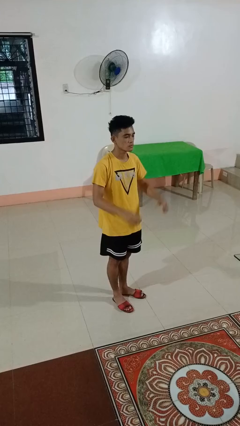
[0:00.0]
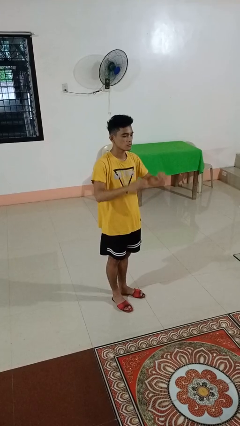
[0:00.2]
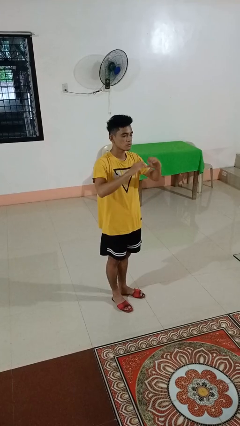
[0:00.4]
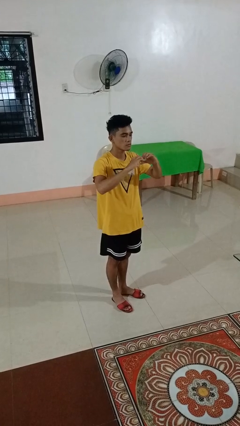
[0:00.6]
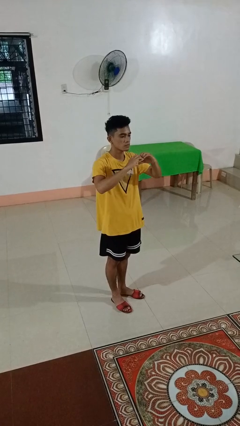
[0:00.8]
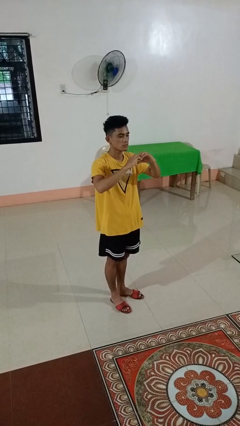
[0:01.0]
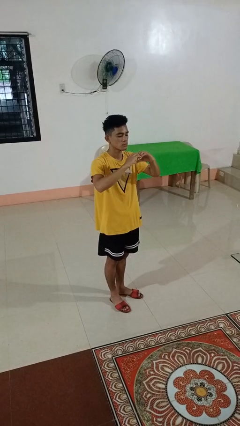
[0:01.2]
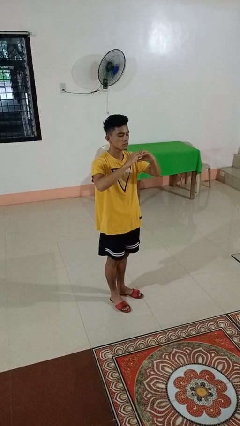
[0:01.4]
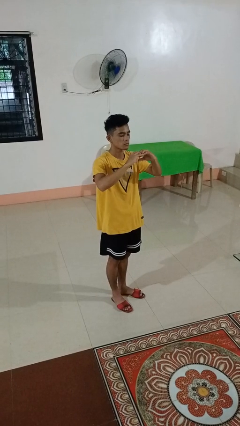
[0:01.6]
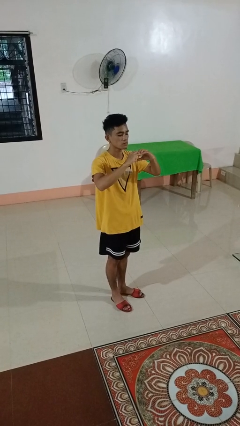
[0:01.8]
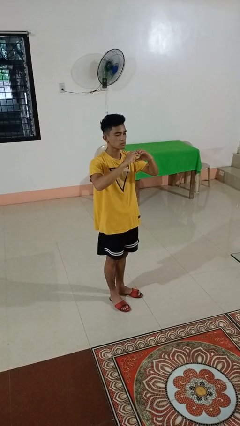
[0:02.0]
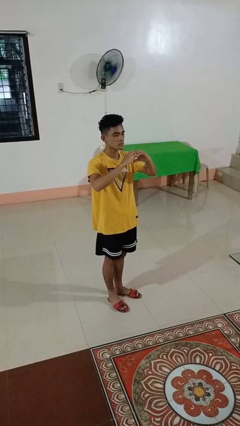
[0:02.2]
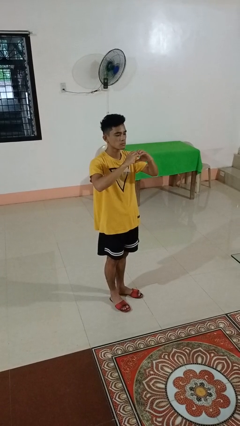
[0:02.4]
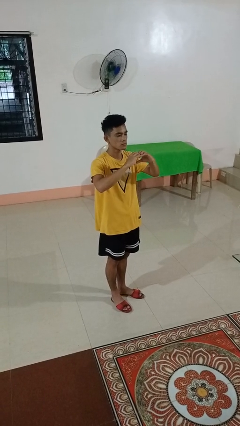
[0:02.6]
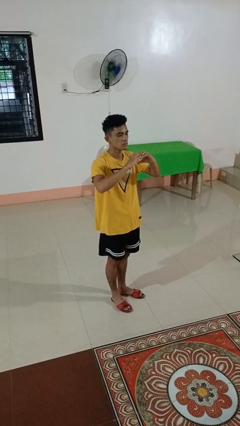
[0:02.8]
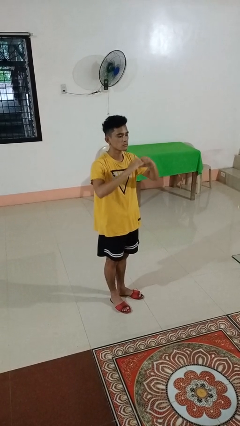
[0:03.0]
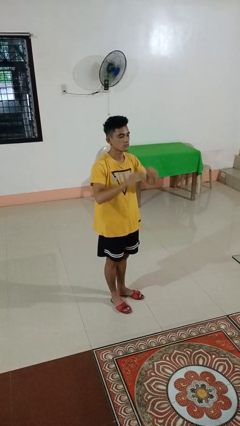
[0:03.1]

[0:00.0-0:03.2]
person gestures heart

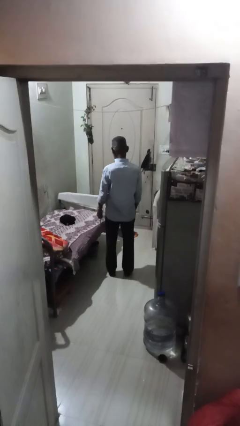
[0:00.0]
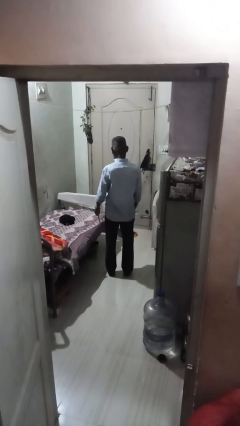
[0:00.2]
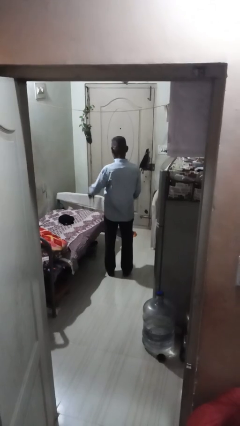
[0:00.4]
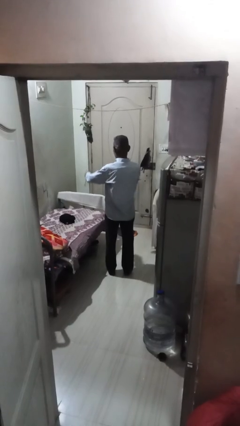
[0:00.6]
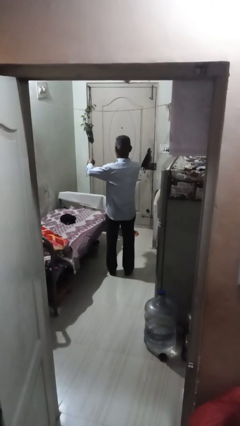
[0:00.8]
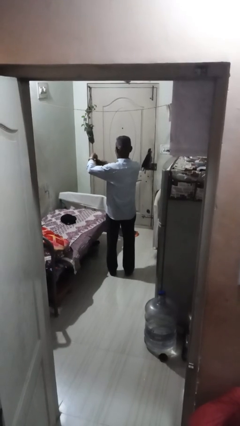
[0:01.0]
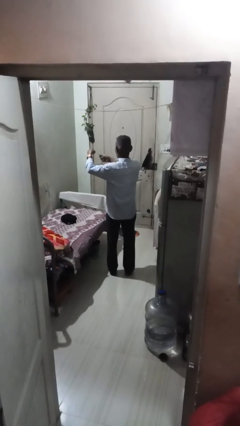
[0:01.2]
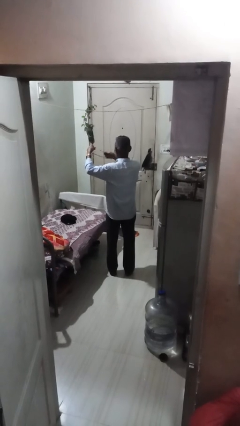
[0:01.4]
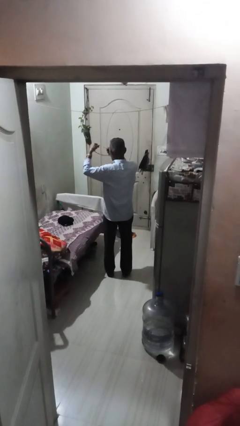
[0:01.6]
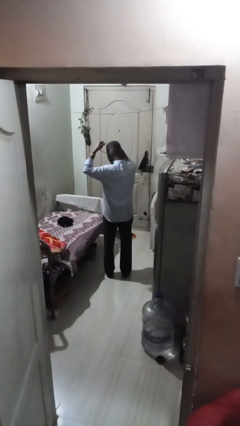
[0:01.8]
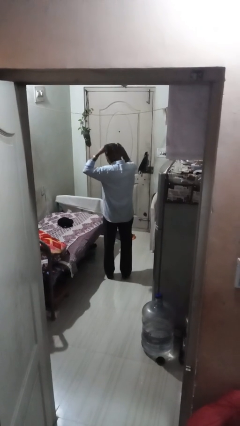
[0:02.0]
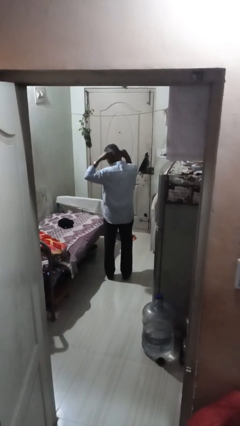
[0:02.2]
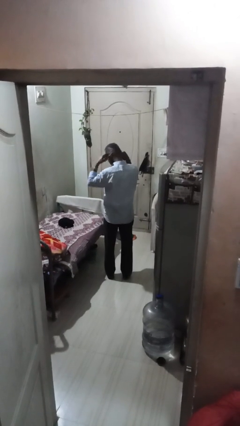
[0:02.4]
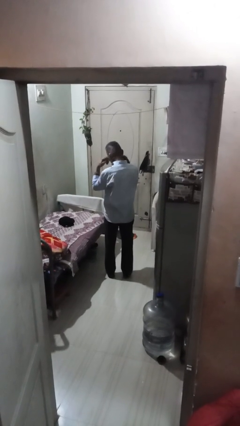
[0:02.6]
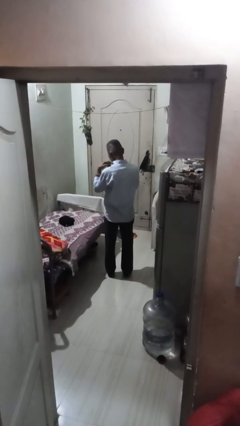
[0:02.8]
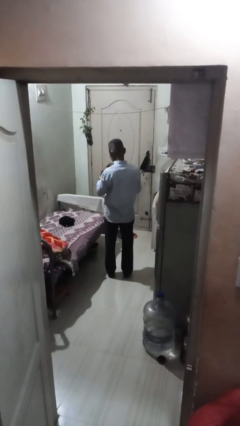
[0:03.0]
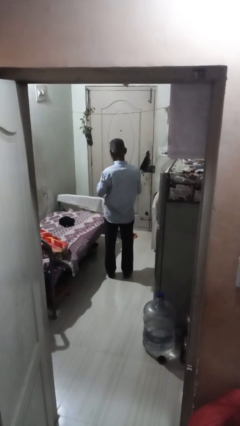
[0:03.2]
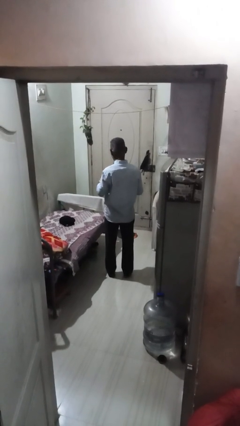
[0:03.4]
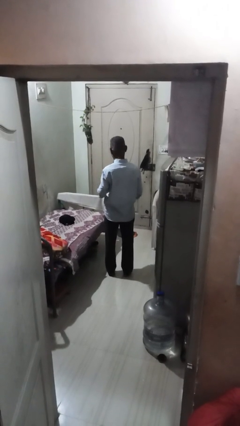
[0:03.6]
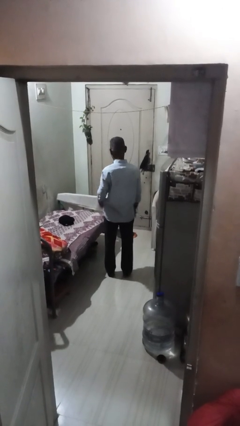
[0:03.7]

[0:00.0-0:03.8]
person puts on necklace

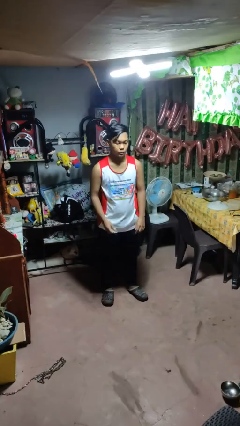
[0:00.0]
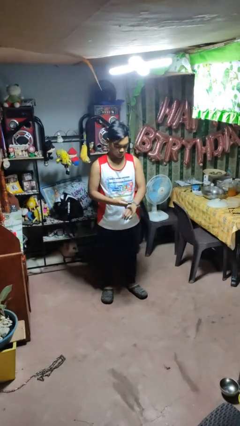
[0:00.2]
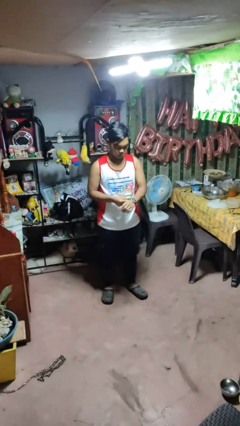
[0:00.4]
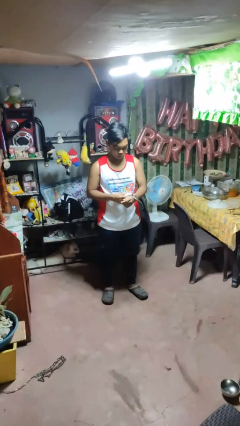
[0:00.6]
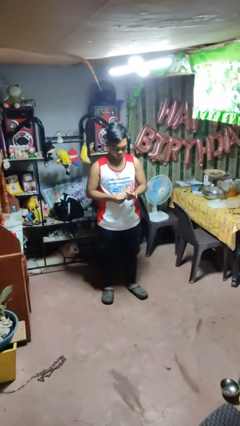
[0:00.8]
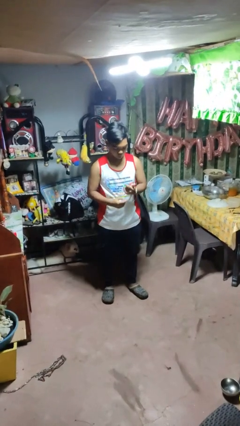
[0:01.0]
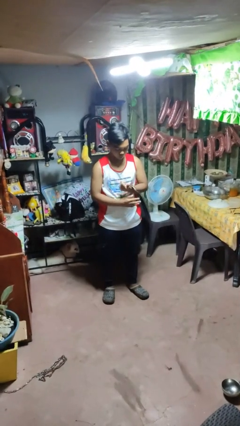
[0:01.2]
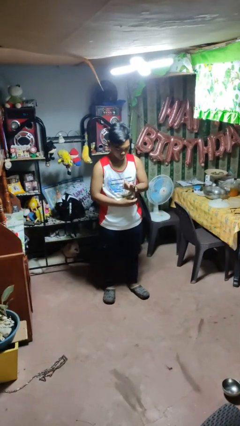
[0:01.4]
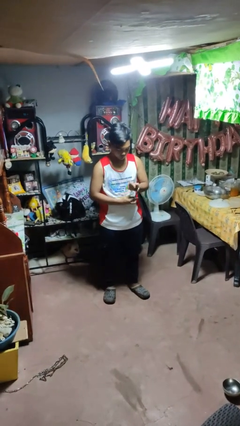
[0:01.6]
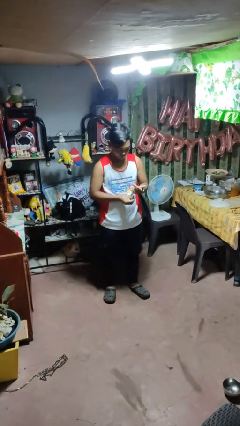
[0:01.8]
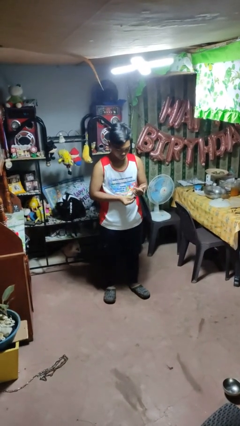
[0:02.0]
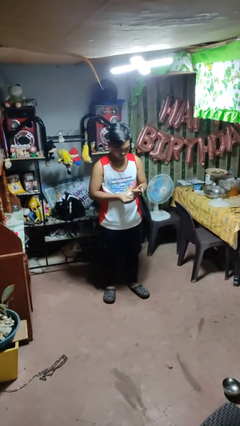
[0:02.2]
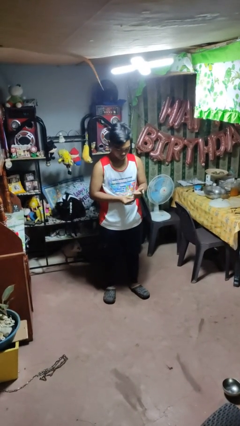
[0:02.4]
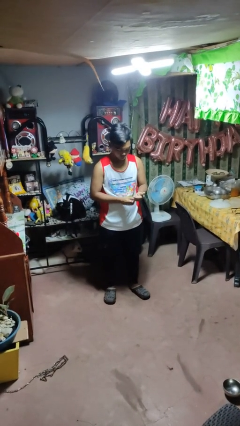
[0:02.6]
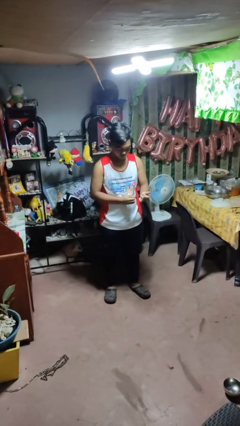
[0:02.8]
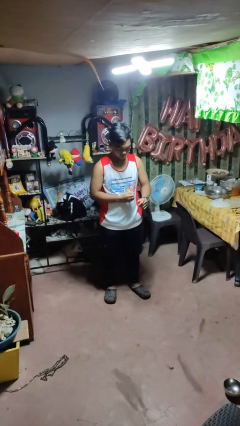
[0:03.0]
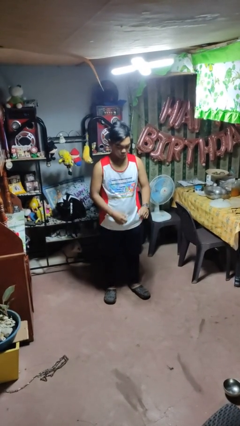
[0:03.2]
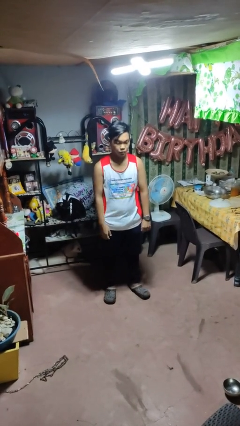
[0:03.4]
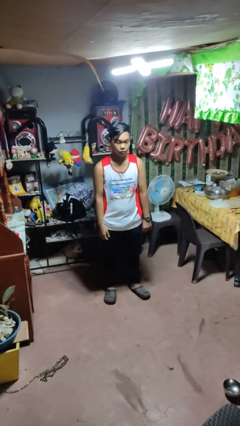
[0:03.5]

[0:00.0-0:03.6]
person puts on wristwatch

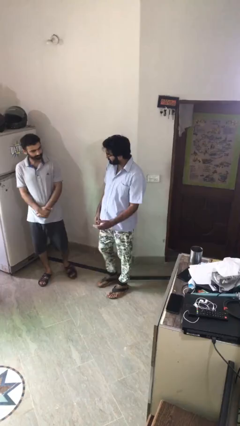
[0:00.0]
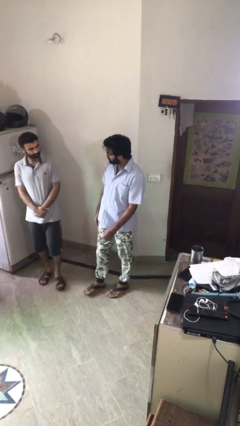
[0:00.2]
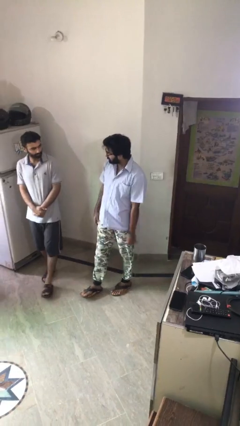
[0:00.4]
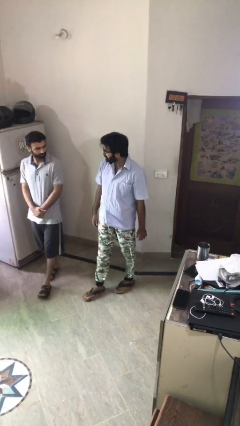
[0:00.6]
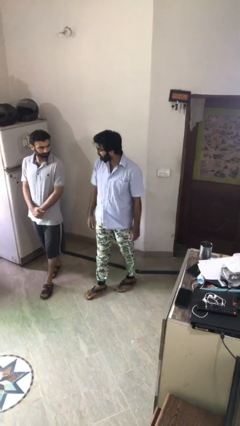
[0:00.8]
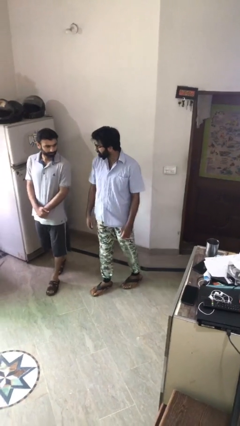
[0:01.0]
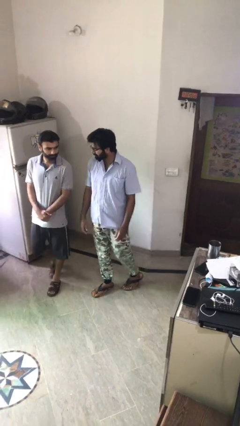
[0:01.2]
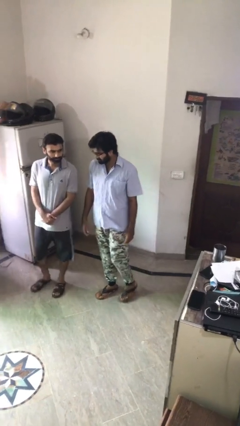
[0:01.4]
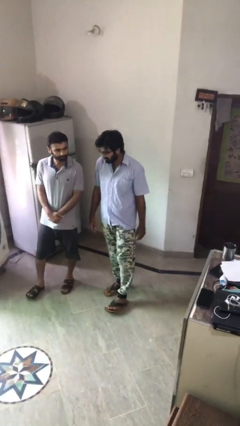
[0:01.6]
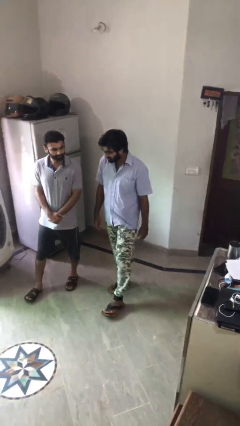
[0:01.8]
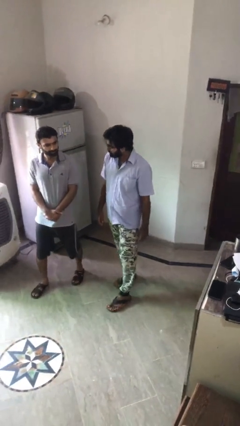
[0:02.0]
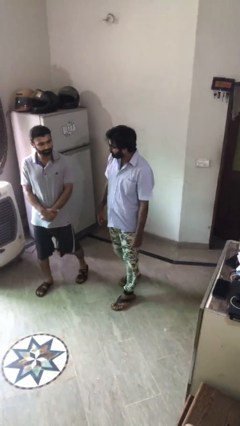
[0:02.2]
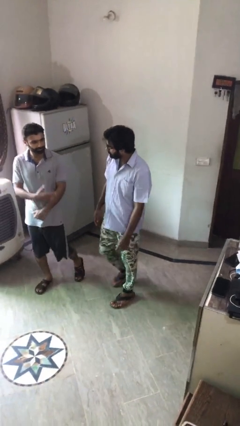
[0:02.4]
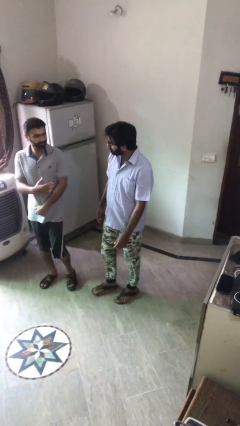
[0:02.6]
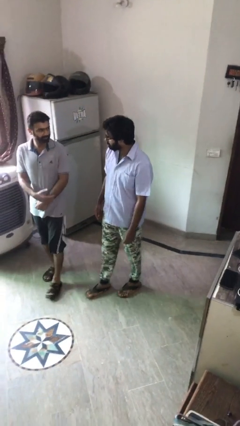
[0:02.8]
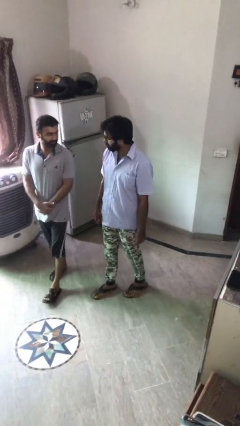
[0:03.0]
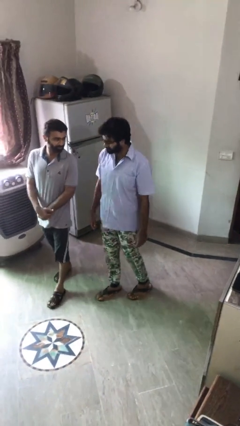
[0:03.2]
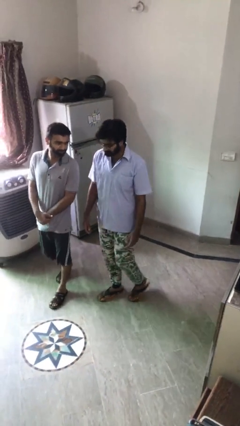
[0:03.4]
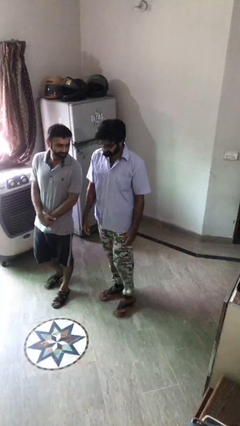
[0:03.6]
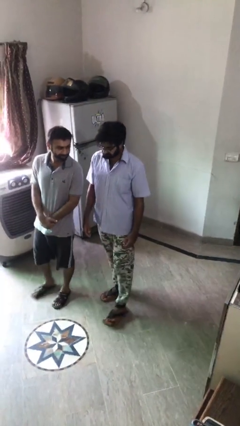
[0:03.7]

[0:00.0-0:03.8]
person talks to person

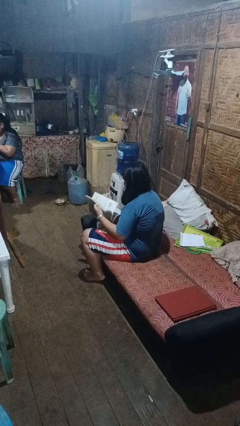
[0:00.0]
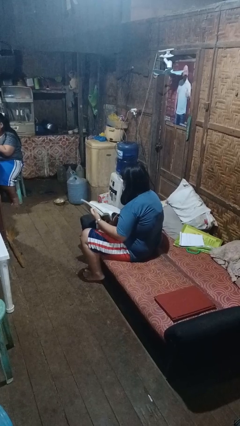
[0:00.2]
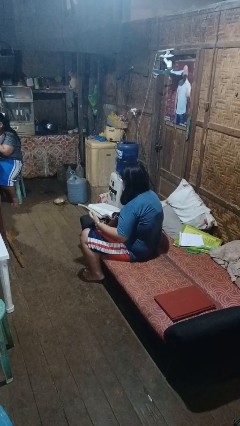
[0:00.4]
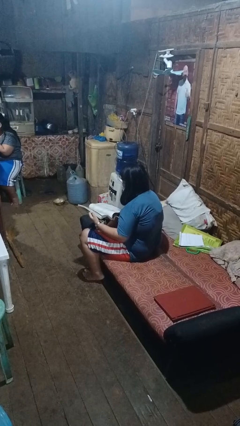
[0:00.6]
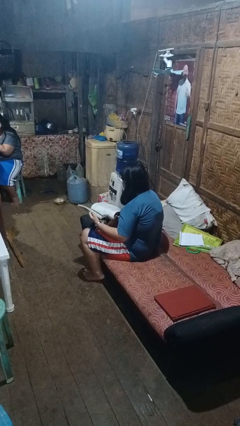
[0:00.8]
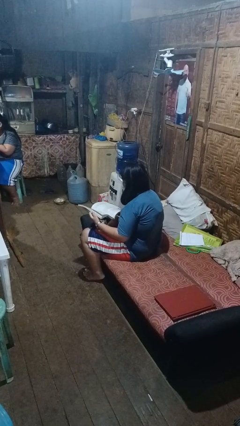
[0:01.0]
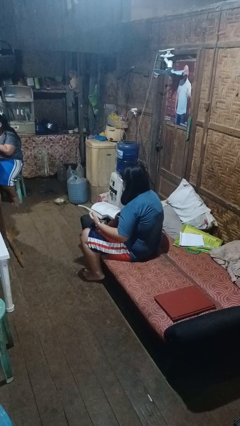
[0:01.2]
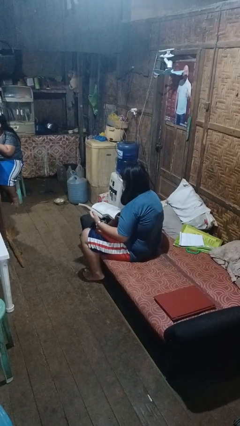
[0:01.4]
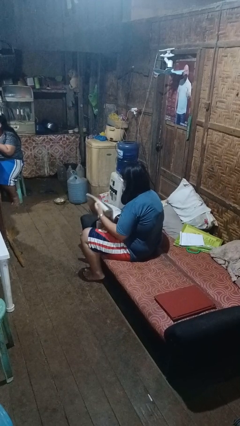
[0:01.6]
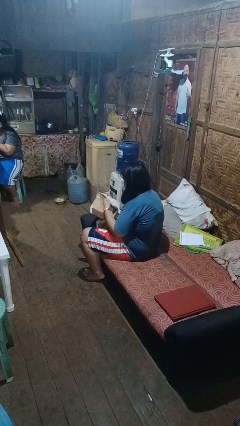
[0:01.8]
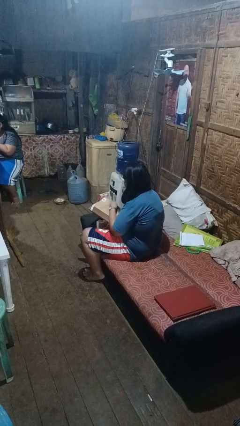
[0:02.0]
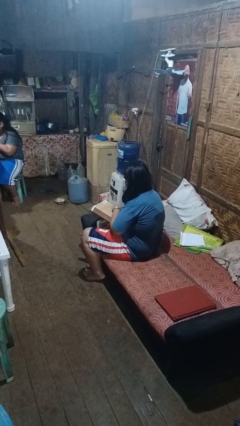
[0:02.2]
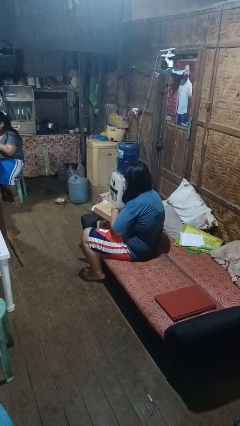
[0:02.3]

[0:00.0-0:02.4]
person reads book

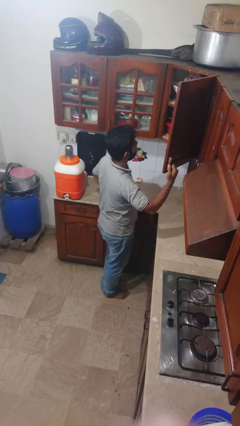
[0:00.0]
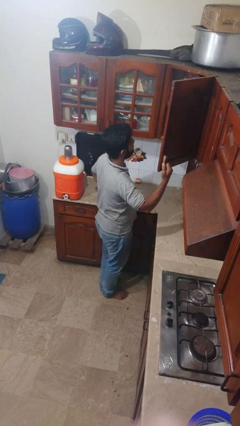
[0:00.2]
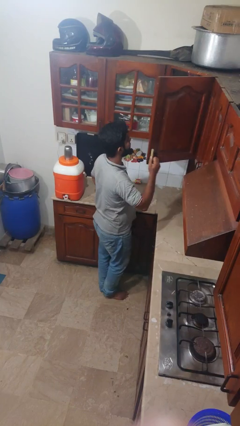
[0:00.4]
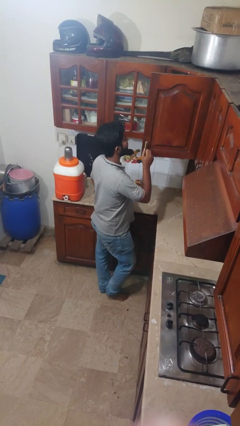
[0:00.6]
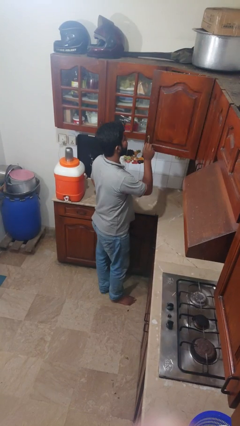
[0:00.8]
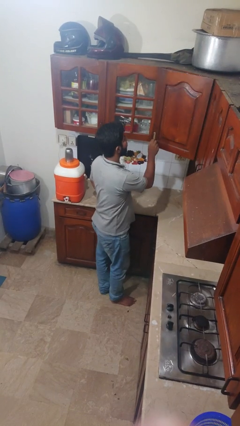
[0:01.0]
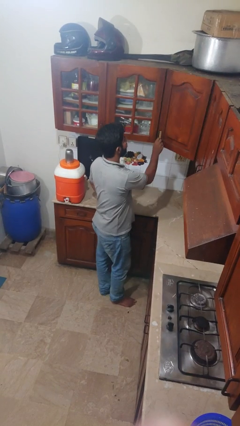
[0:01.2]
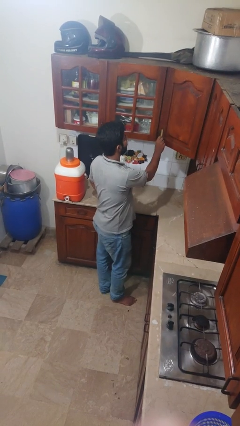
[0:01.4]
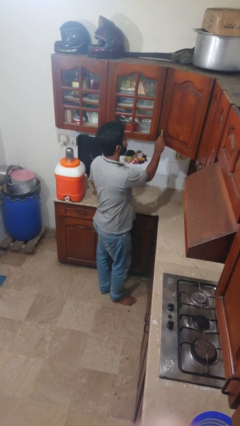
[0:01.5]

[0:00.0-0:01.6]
person closes cabinet
